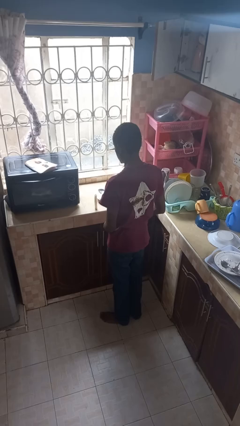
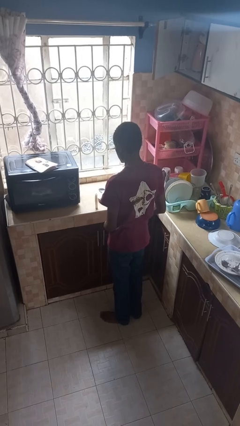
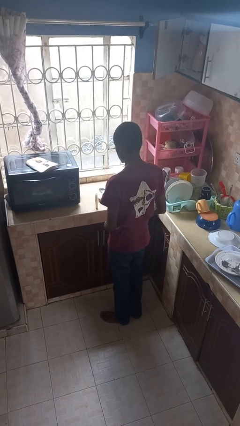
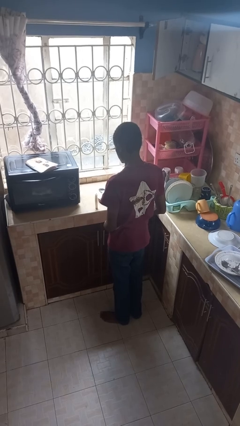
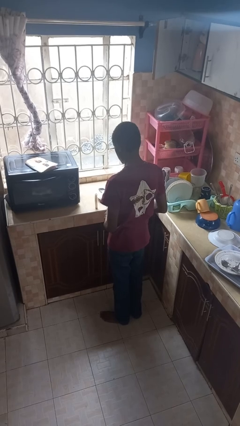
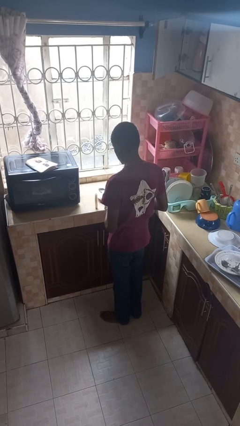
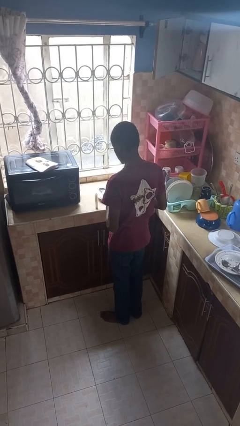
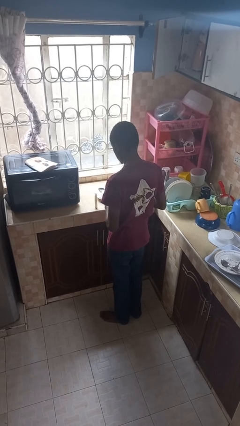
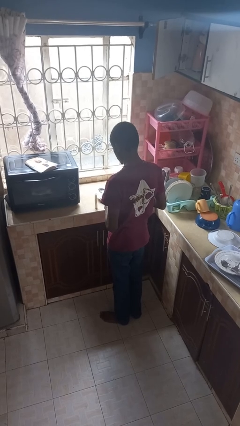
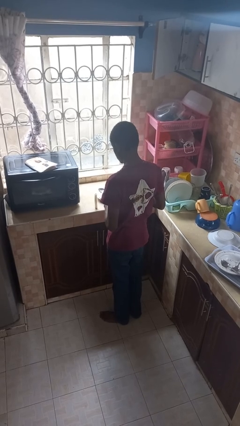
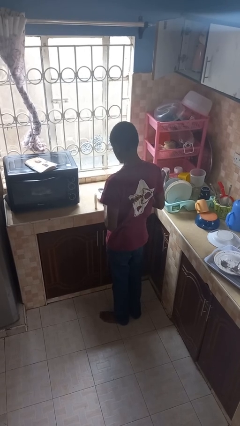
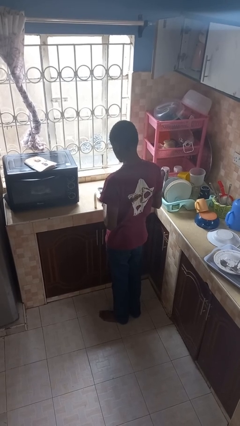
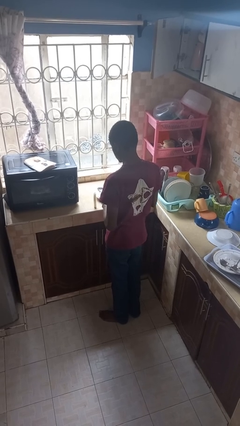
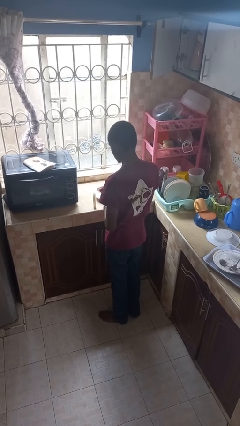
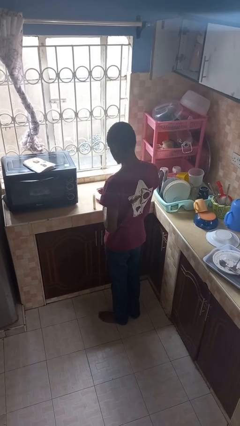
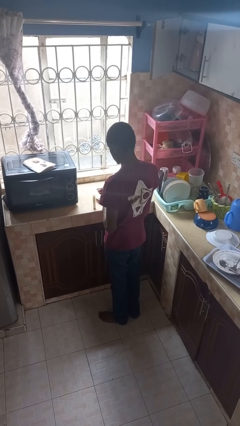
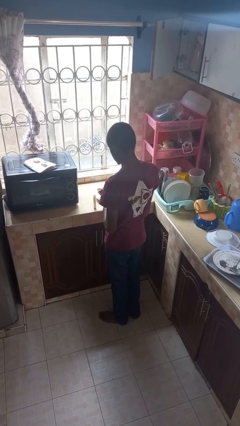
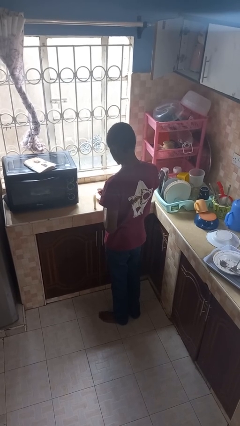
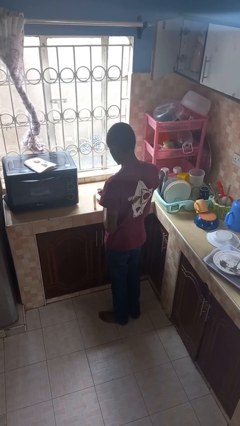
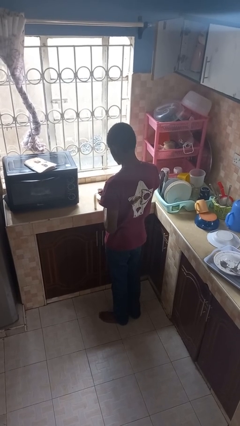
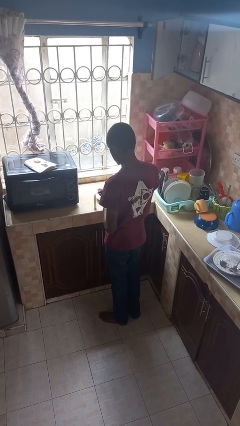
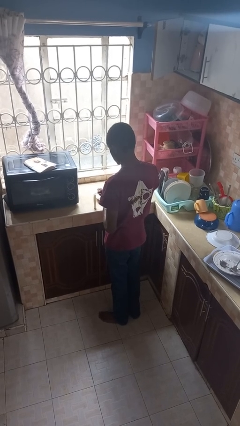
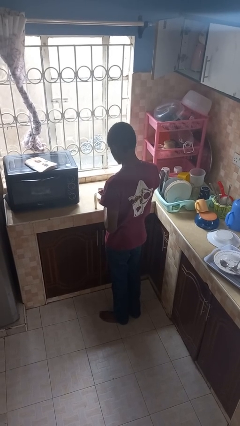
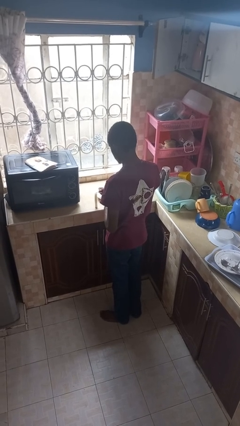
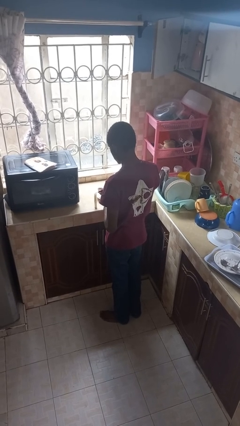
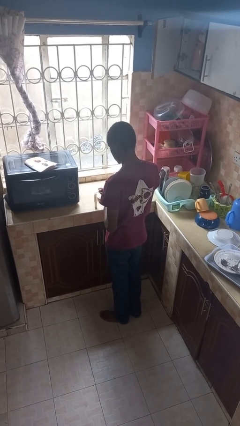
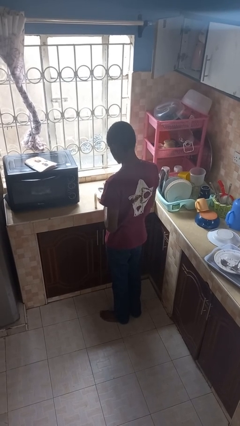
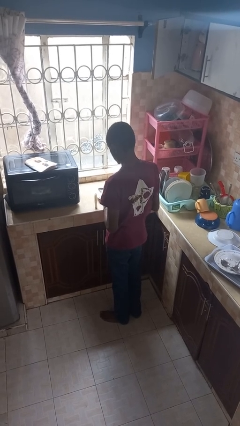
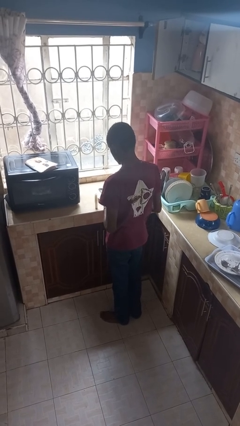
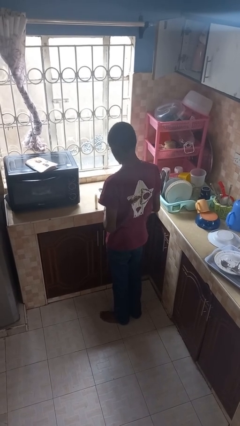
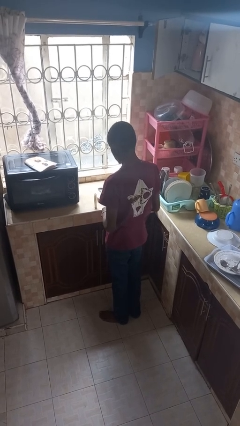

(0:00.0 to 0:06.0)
person lights candle

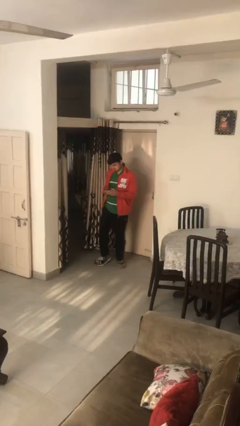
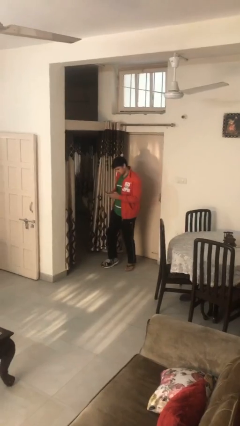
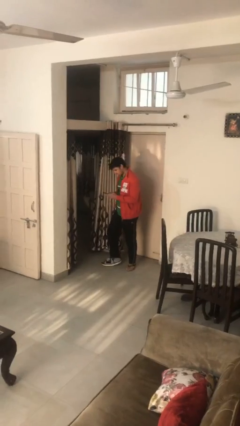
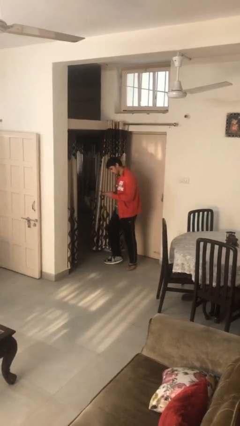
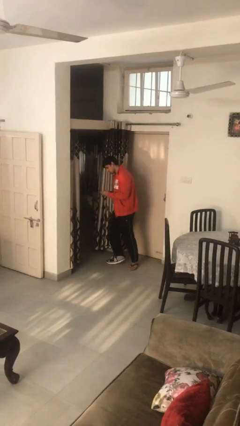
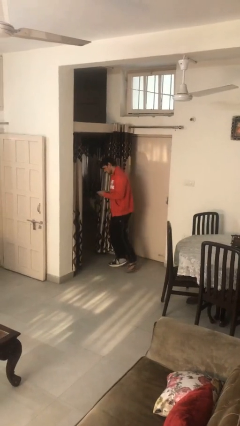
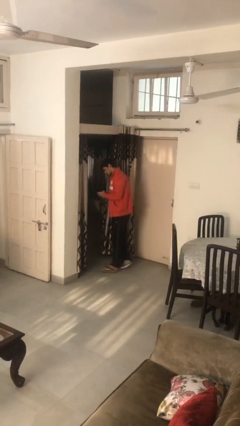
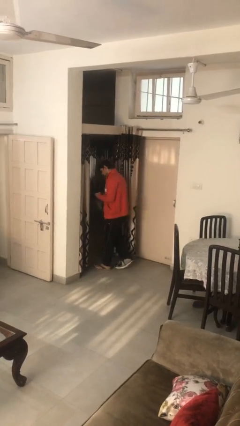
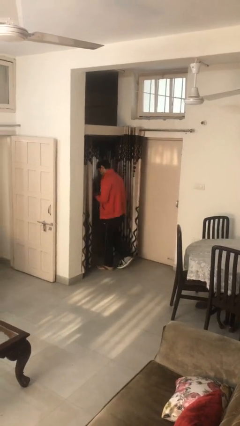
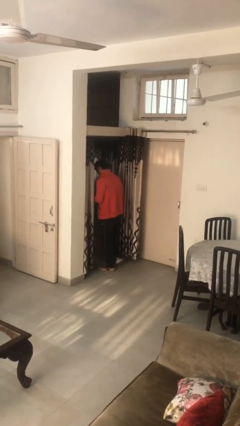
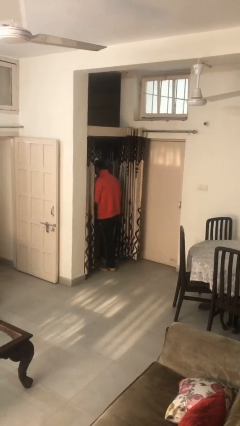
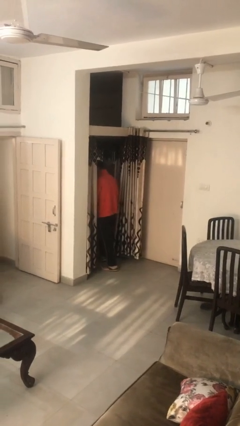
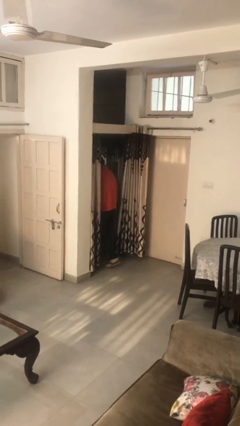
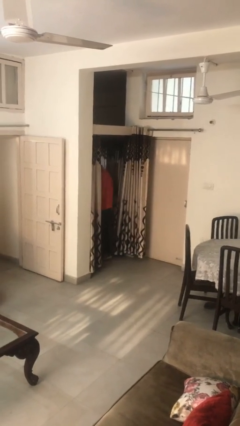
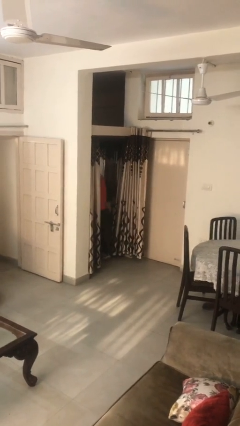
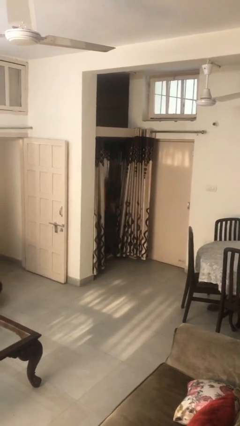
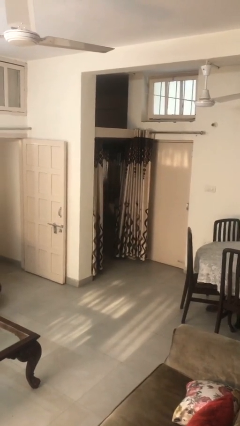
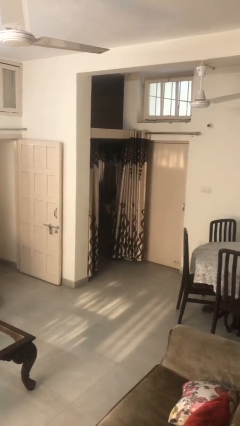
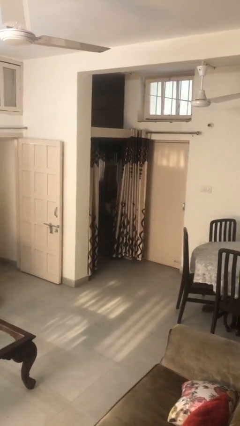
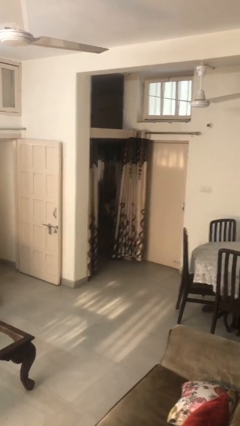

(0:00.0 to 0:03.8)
person exits scene through structure

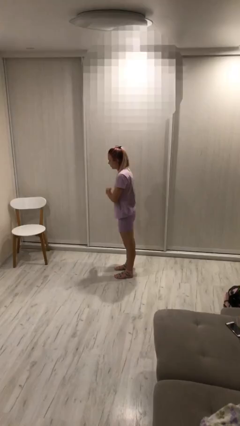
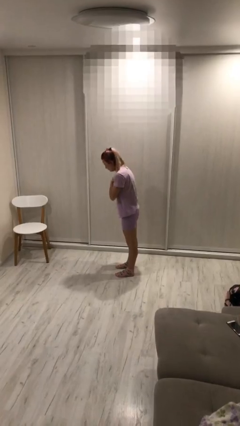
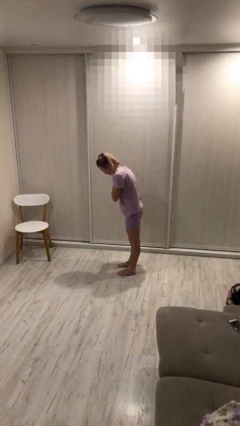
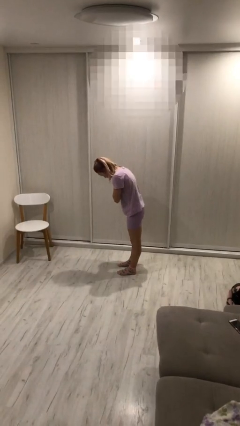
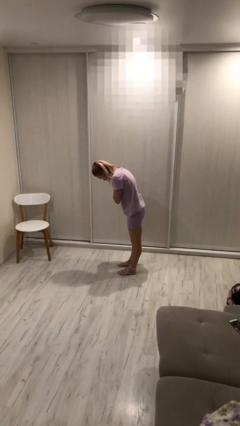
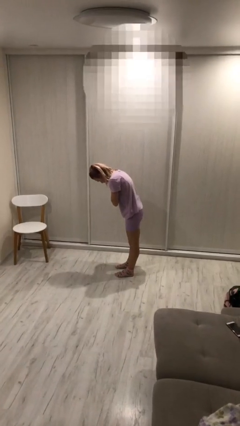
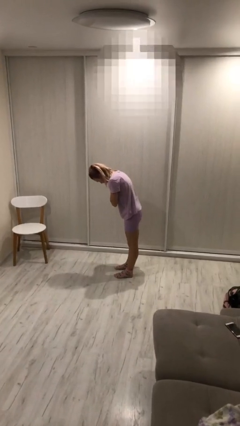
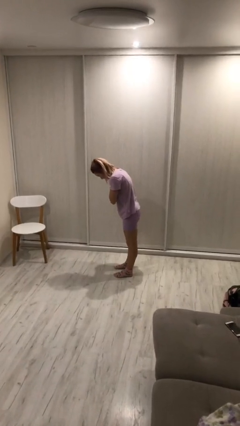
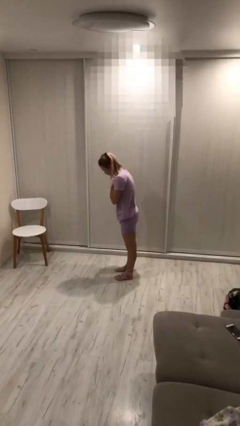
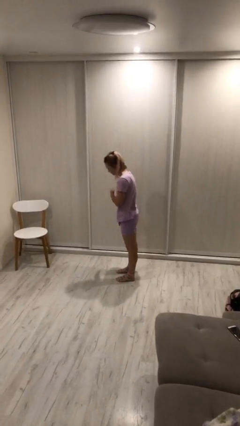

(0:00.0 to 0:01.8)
person bows

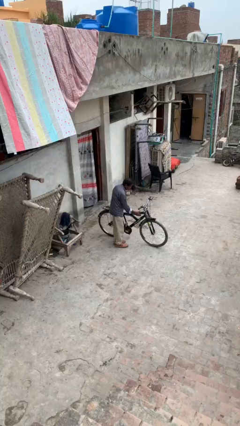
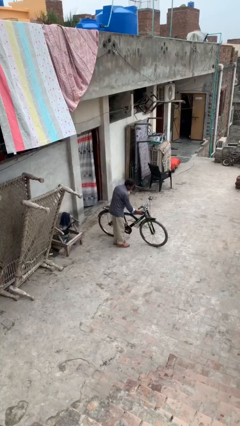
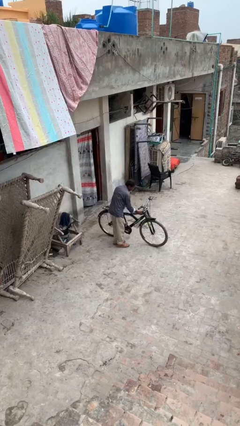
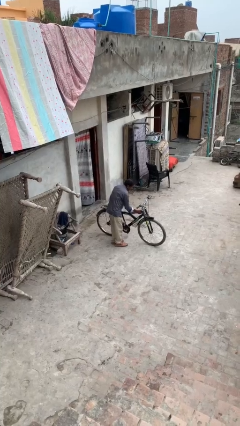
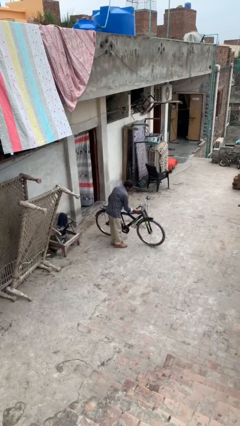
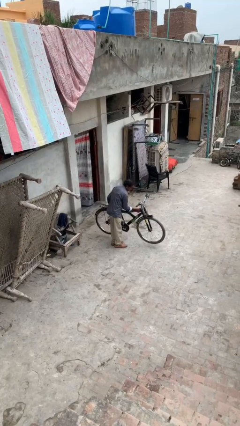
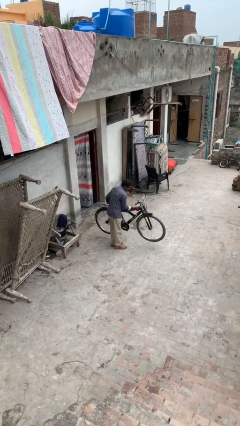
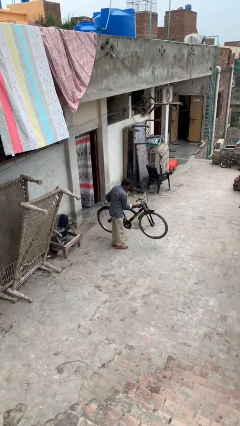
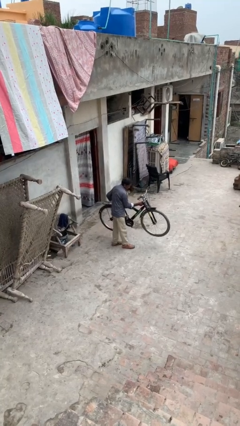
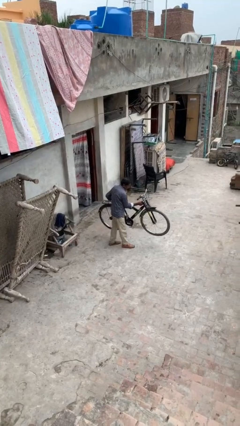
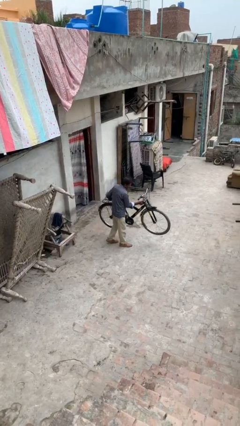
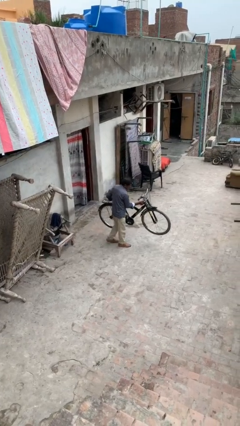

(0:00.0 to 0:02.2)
person picks up object from floor

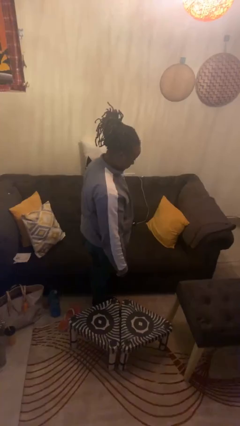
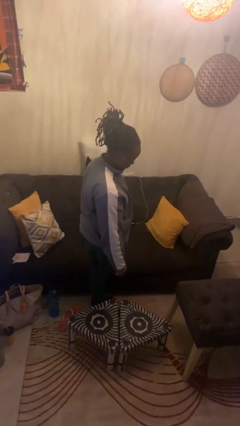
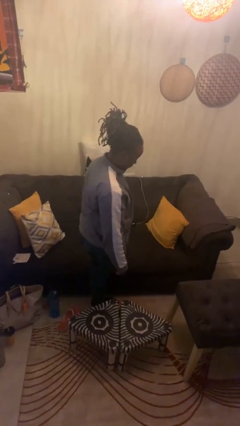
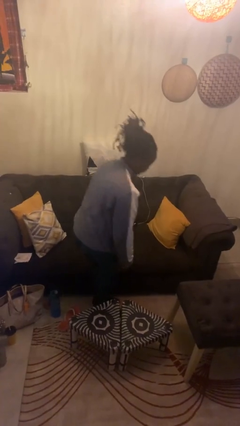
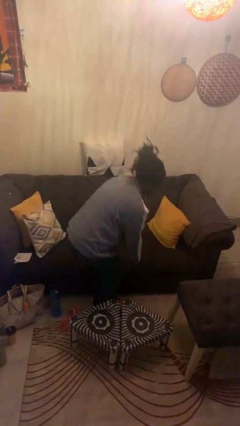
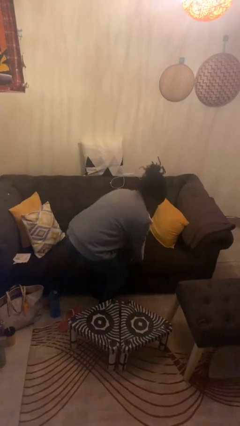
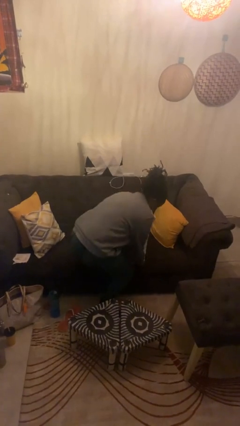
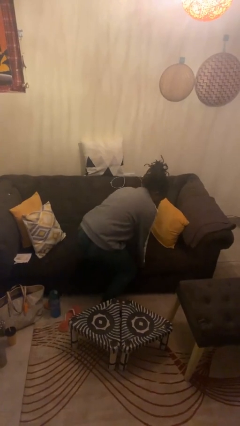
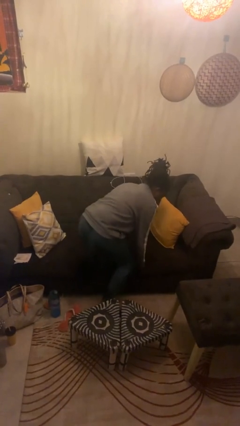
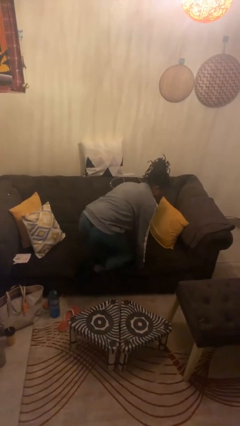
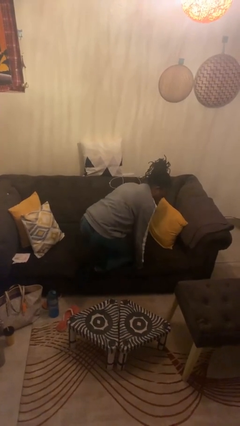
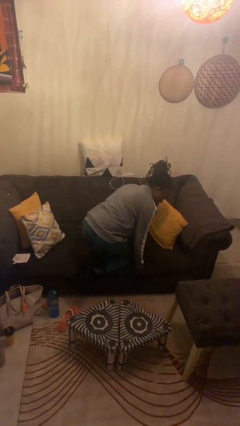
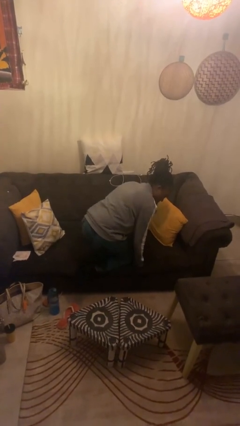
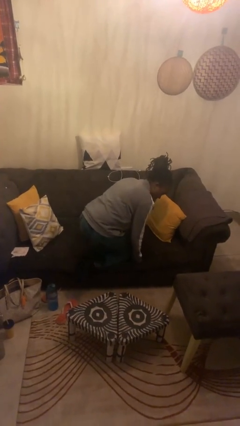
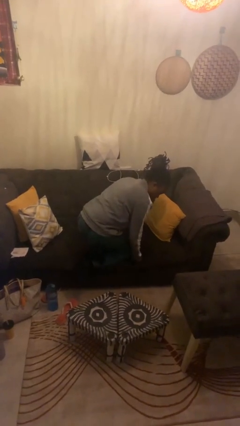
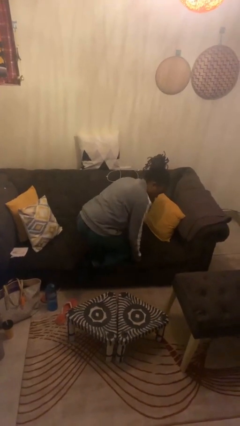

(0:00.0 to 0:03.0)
person climbs on couch

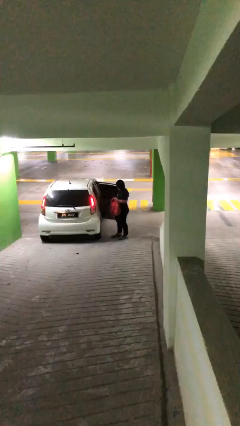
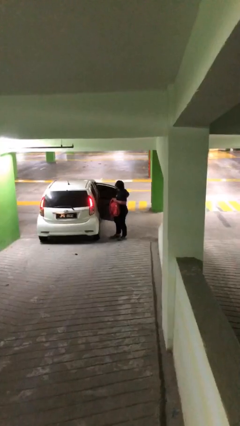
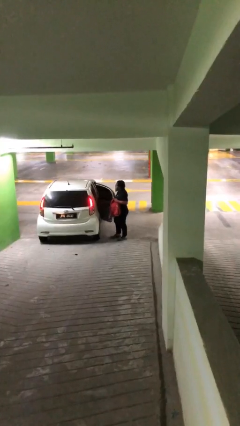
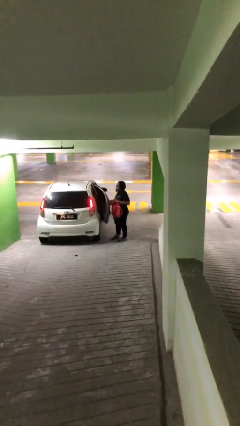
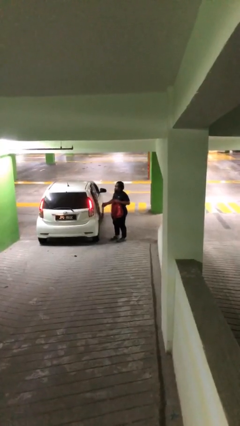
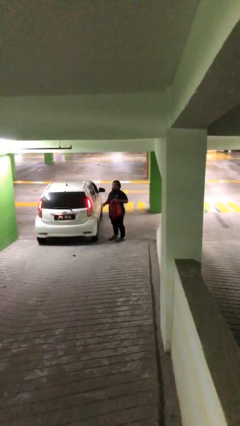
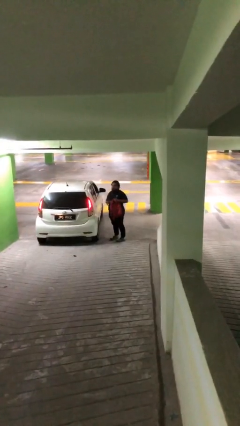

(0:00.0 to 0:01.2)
person closes car door
